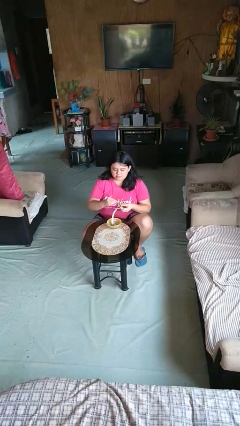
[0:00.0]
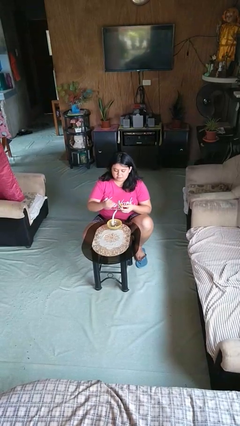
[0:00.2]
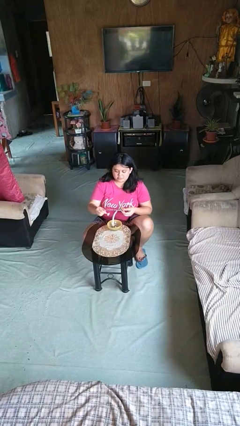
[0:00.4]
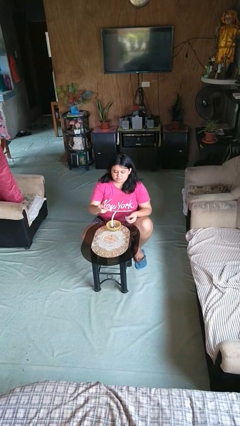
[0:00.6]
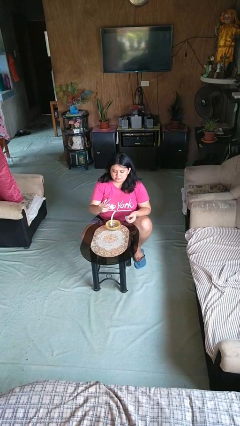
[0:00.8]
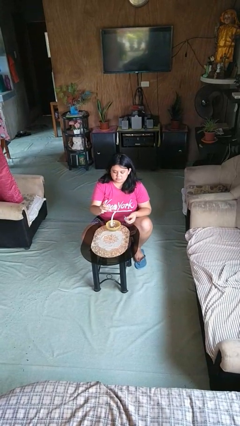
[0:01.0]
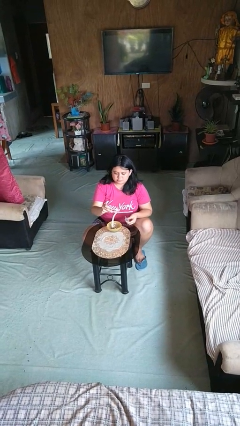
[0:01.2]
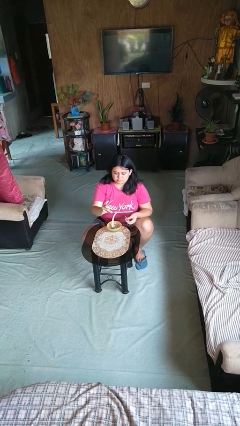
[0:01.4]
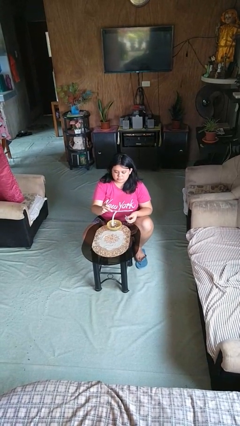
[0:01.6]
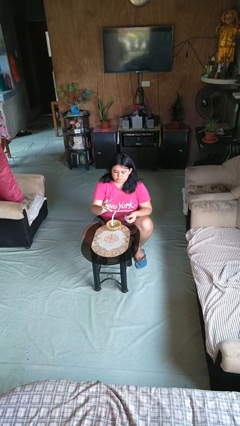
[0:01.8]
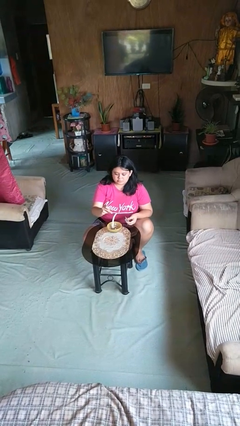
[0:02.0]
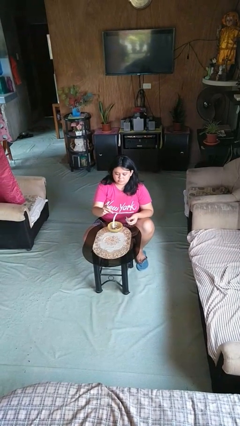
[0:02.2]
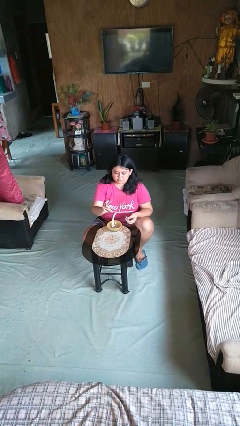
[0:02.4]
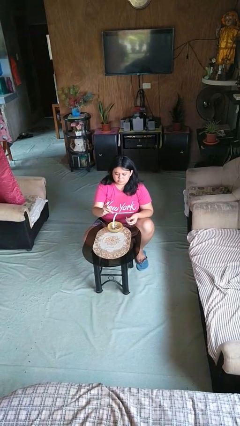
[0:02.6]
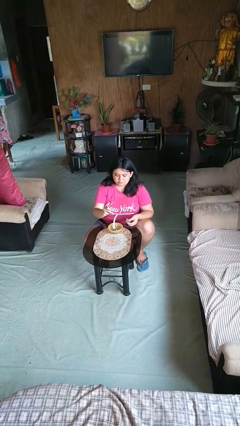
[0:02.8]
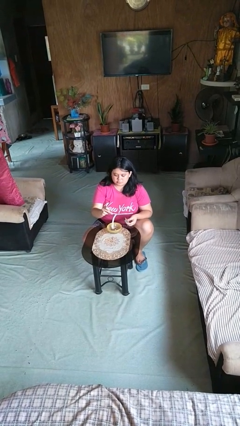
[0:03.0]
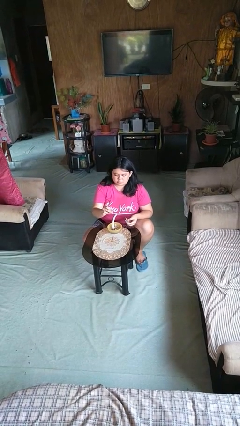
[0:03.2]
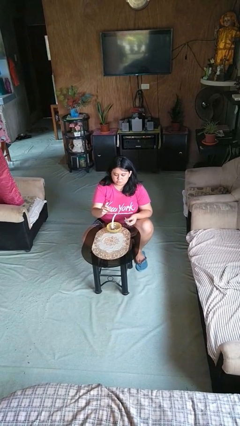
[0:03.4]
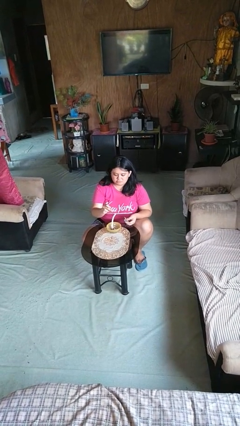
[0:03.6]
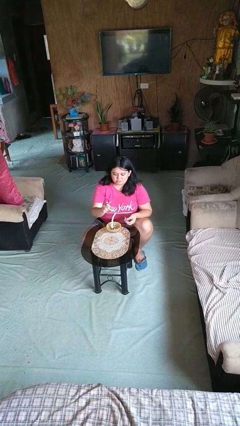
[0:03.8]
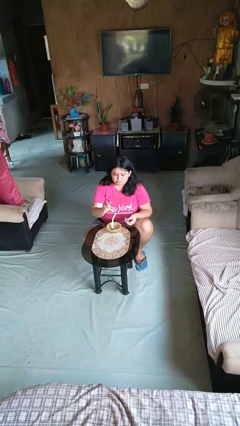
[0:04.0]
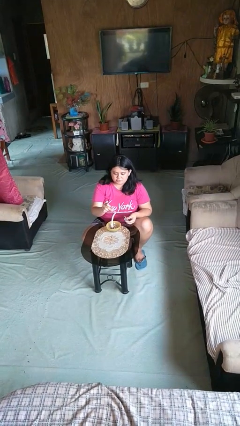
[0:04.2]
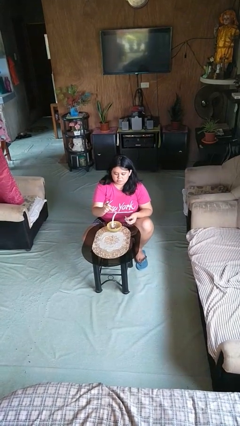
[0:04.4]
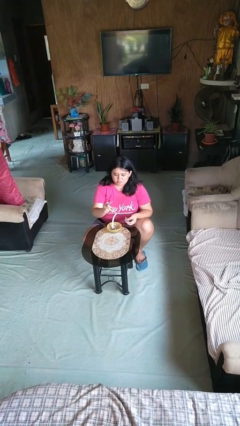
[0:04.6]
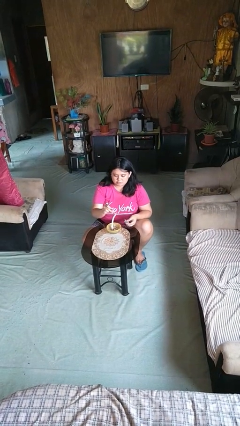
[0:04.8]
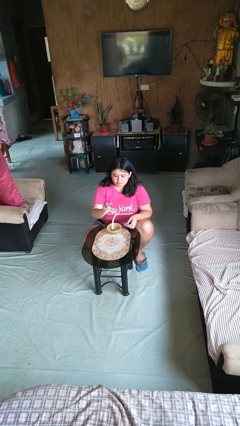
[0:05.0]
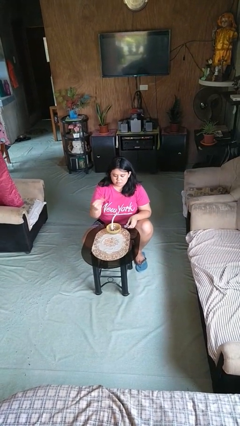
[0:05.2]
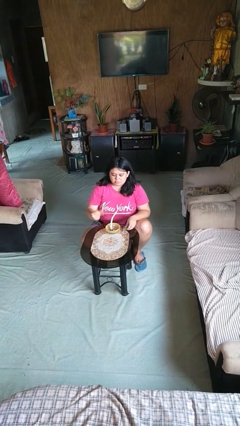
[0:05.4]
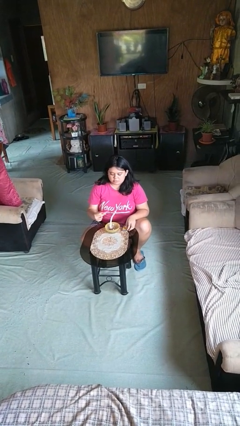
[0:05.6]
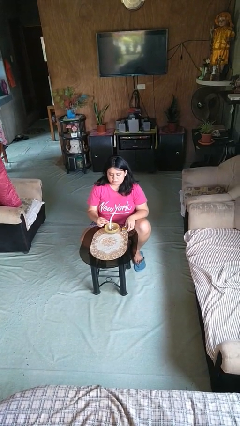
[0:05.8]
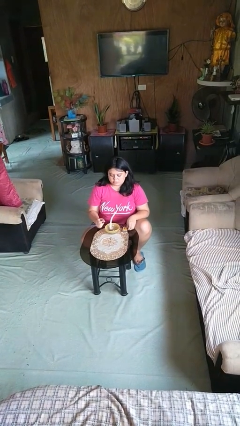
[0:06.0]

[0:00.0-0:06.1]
person lights candle

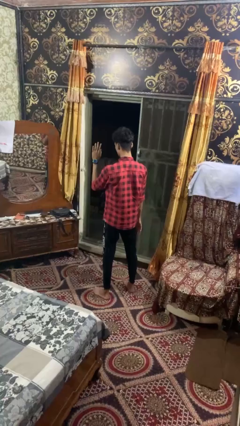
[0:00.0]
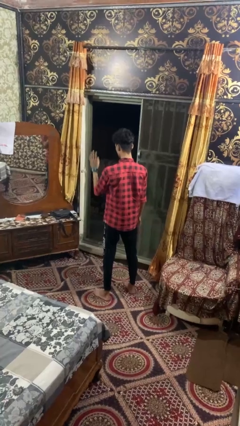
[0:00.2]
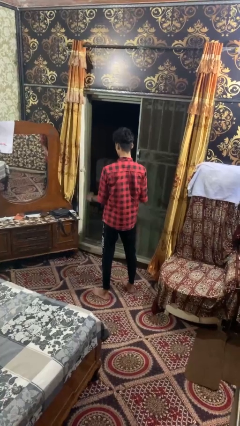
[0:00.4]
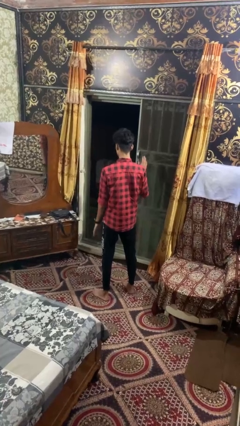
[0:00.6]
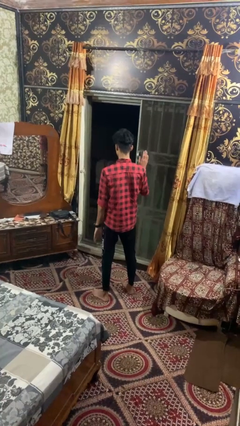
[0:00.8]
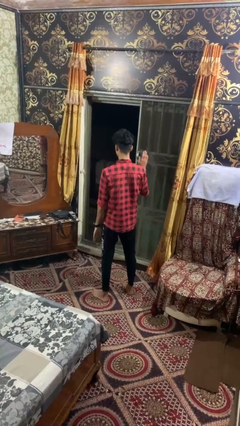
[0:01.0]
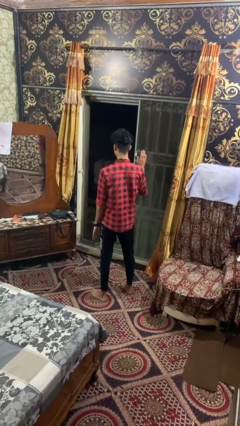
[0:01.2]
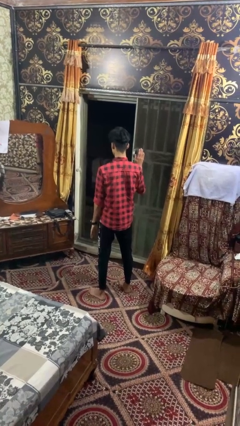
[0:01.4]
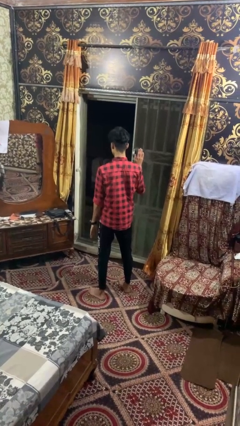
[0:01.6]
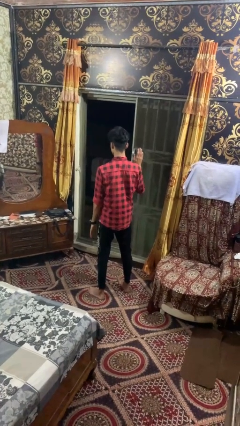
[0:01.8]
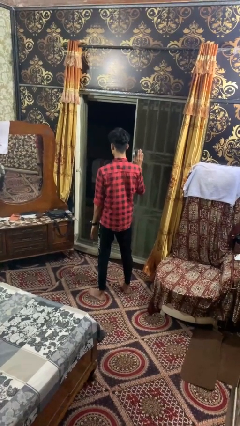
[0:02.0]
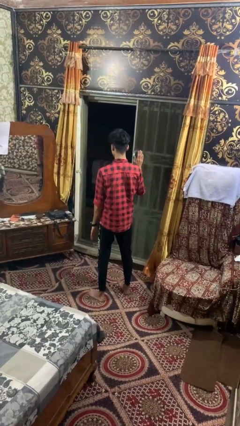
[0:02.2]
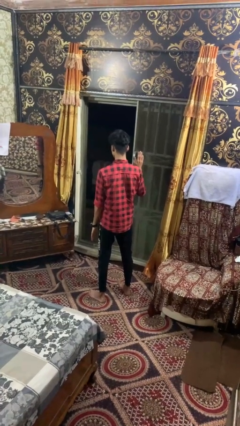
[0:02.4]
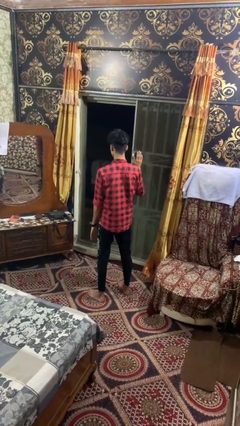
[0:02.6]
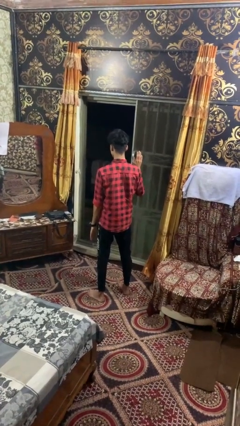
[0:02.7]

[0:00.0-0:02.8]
person gestures swipe right

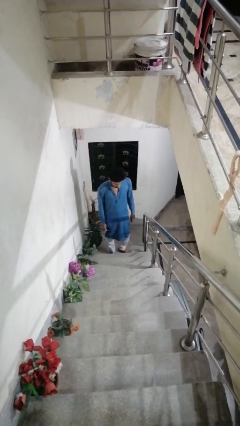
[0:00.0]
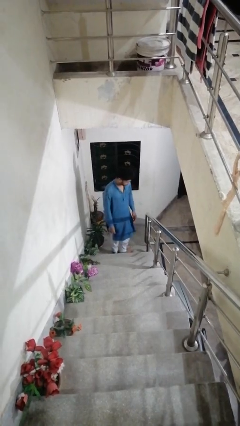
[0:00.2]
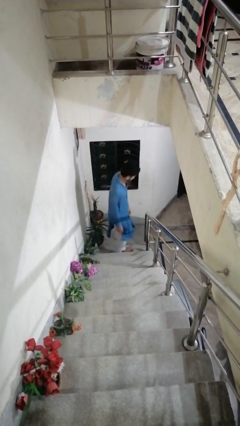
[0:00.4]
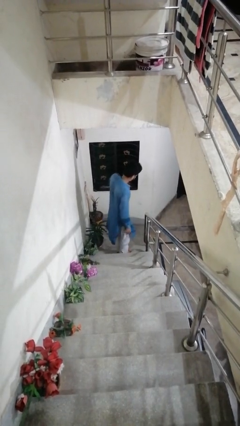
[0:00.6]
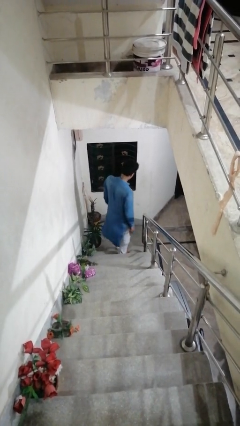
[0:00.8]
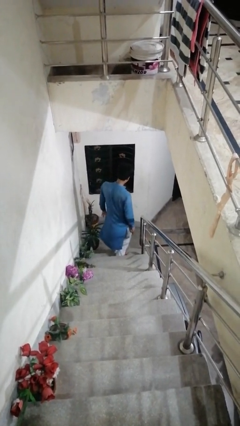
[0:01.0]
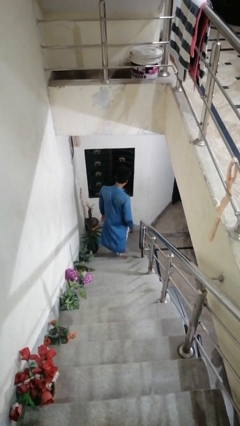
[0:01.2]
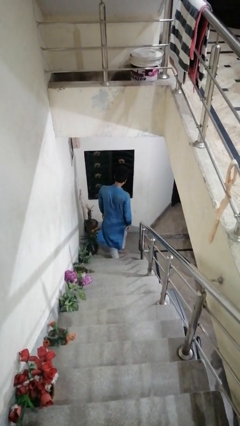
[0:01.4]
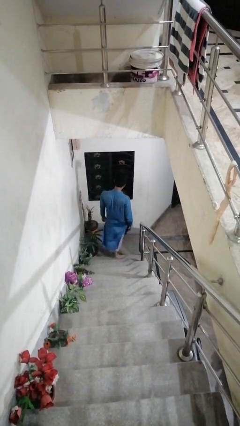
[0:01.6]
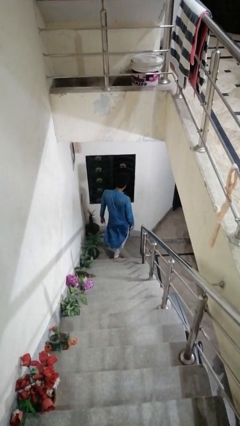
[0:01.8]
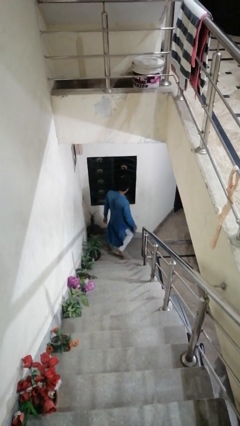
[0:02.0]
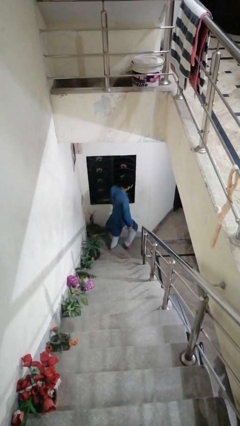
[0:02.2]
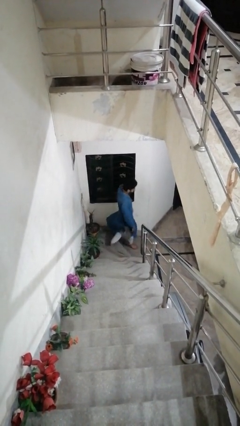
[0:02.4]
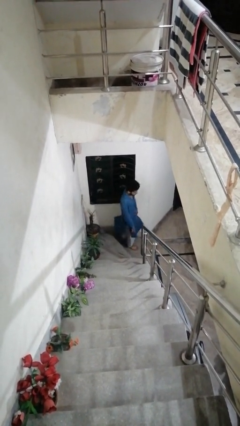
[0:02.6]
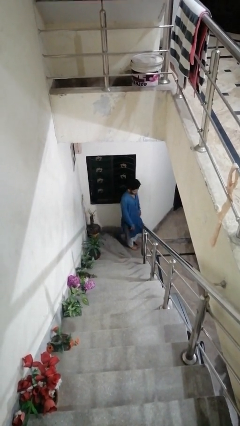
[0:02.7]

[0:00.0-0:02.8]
person climbs down stairs

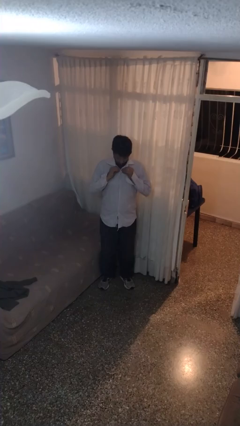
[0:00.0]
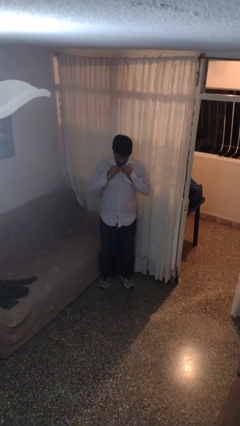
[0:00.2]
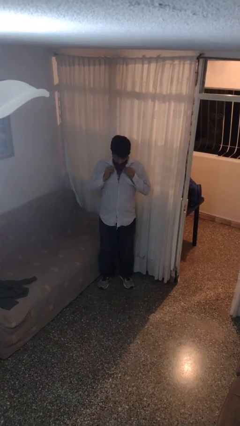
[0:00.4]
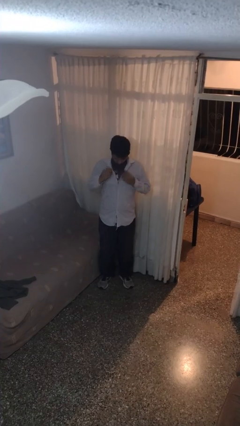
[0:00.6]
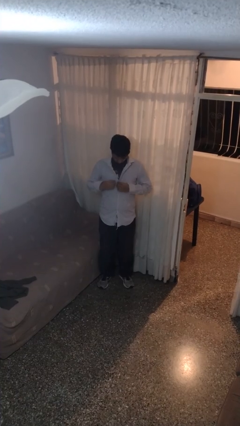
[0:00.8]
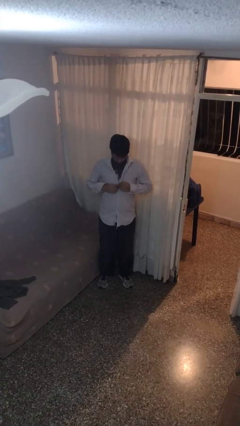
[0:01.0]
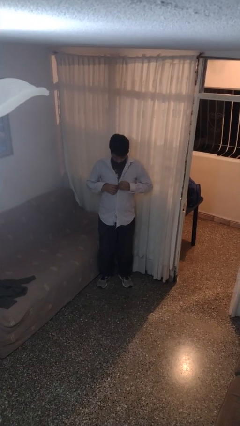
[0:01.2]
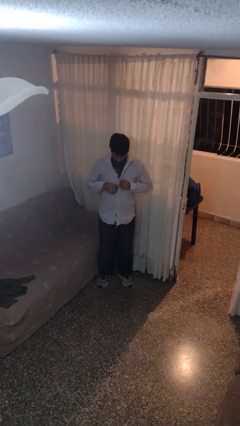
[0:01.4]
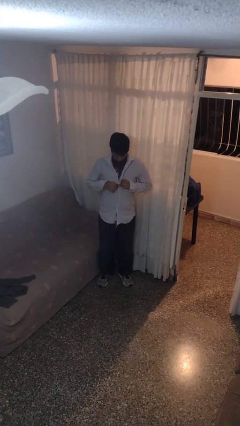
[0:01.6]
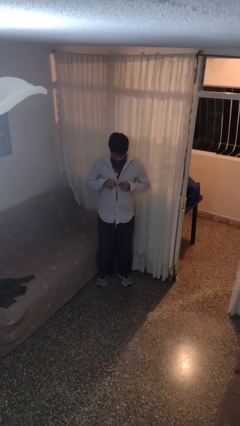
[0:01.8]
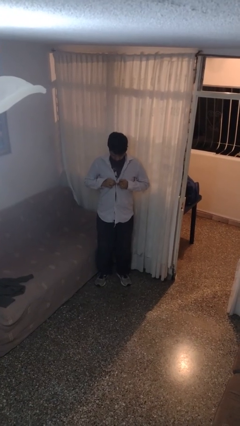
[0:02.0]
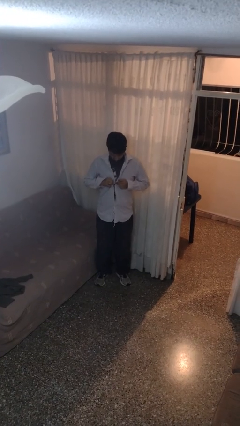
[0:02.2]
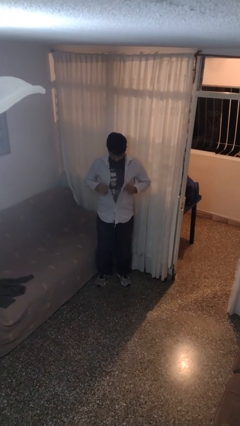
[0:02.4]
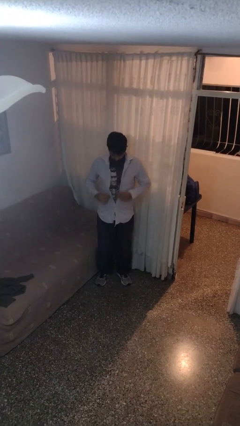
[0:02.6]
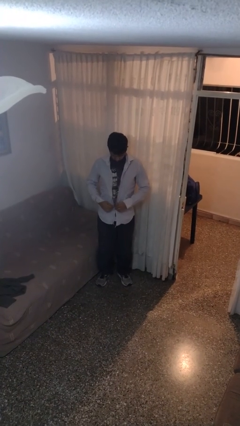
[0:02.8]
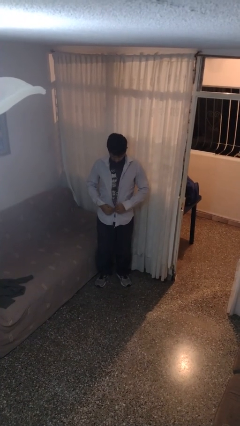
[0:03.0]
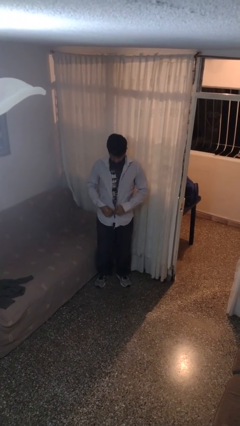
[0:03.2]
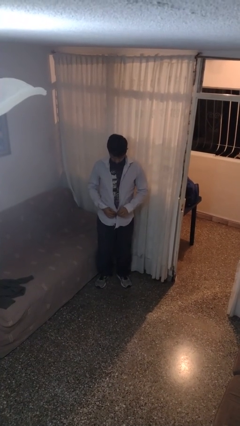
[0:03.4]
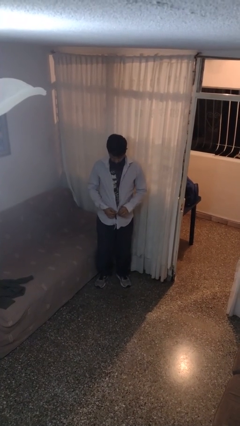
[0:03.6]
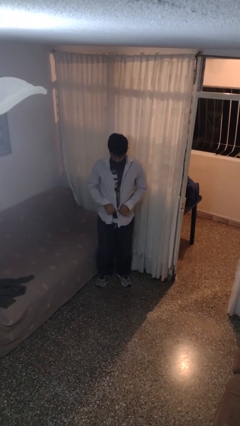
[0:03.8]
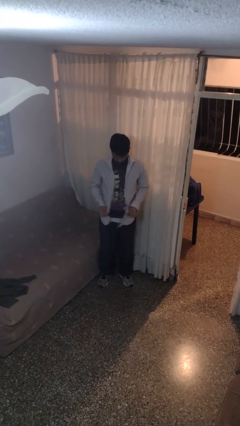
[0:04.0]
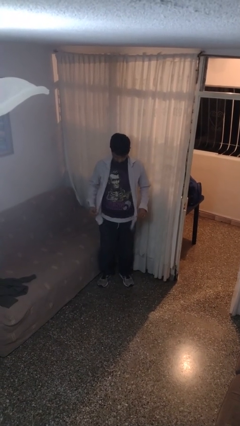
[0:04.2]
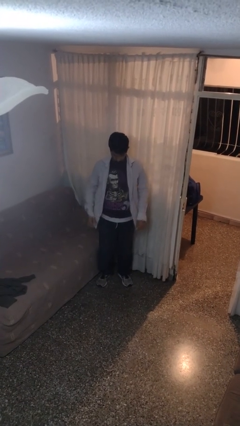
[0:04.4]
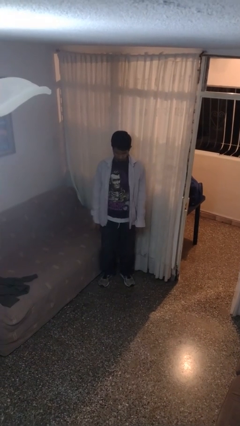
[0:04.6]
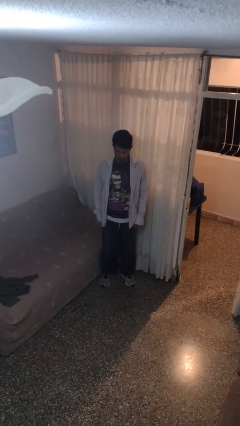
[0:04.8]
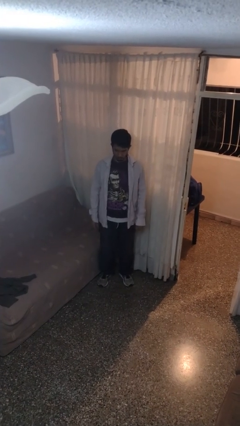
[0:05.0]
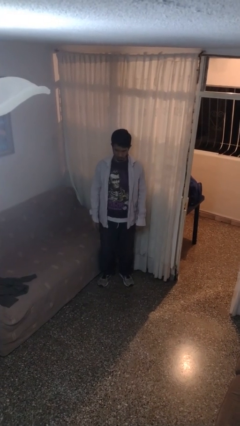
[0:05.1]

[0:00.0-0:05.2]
person unbuttons shirt

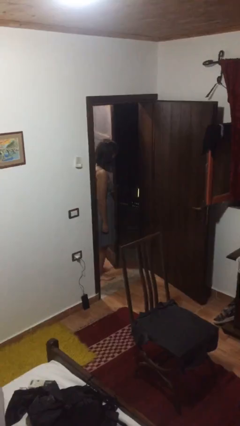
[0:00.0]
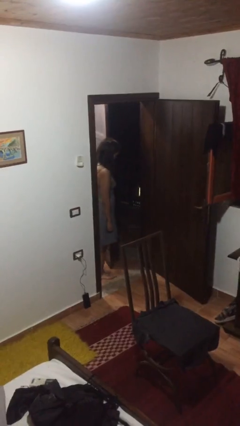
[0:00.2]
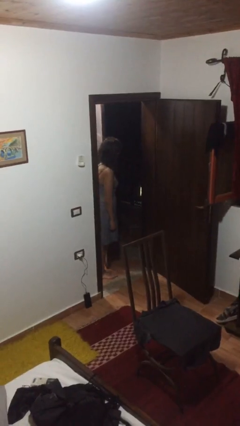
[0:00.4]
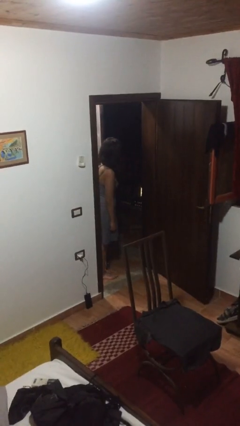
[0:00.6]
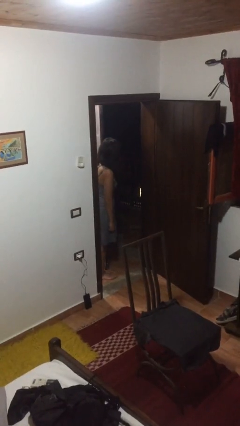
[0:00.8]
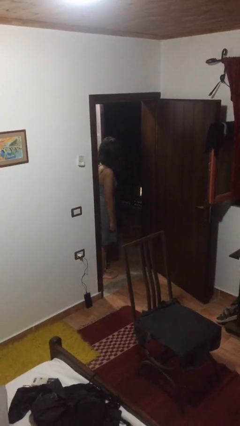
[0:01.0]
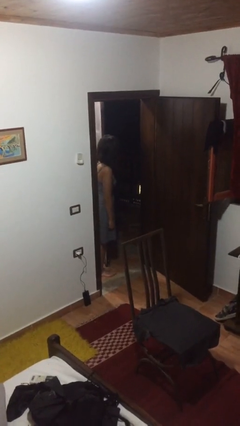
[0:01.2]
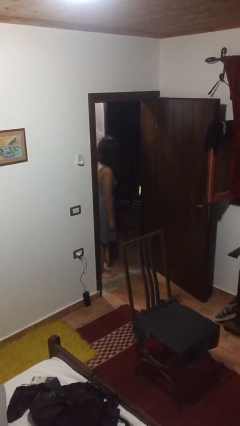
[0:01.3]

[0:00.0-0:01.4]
person opens facility door
